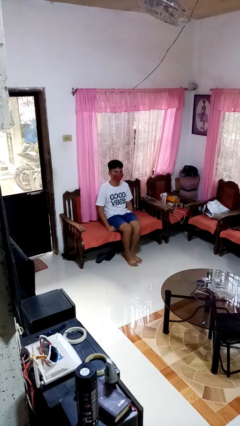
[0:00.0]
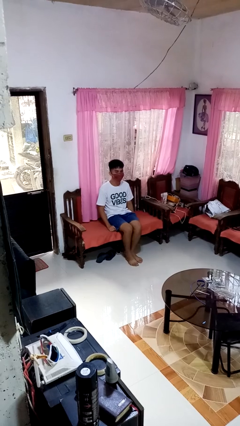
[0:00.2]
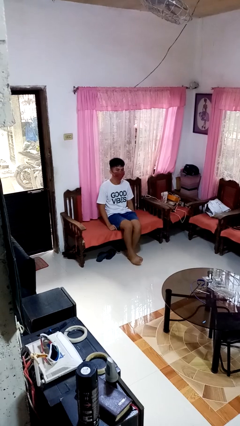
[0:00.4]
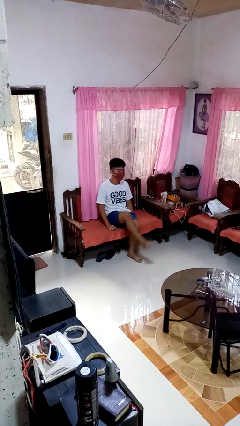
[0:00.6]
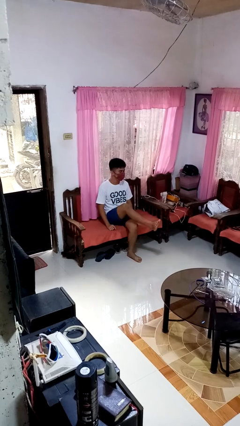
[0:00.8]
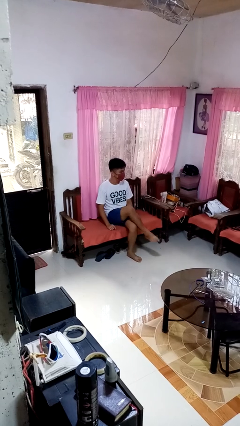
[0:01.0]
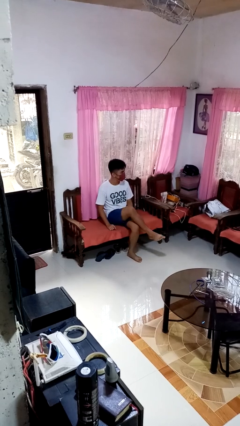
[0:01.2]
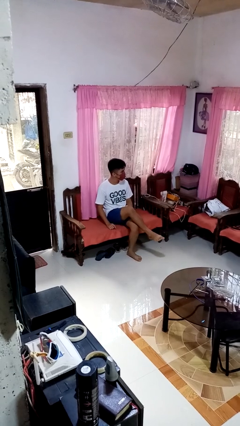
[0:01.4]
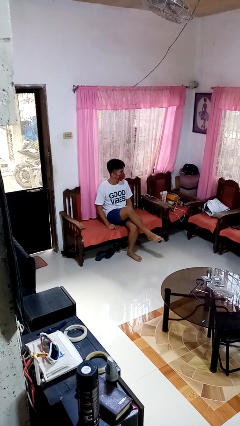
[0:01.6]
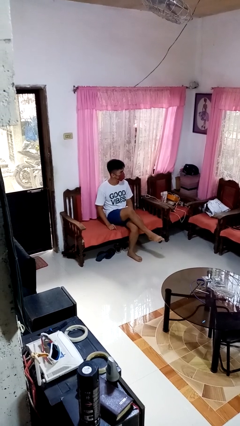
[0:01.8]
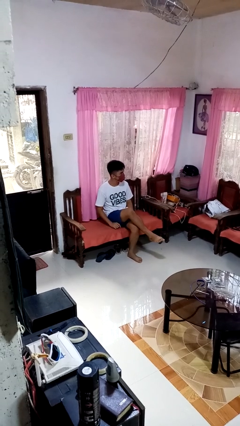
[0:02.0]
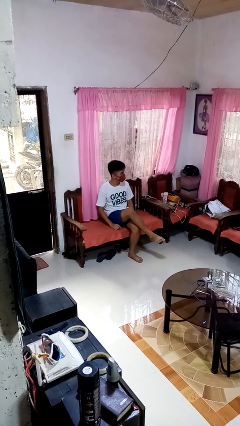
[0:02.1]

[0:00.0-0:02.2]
person crosses legs

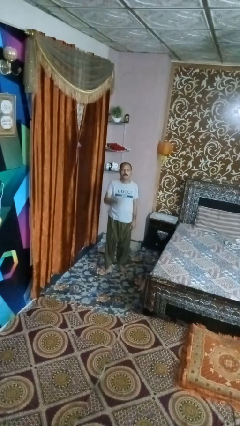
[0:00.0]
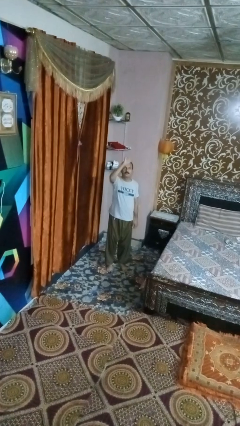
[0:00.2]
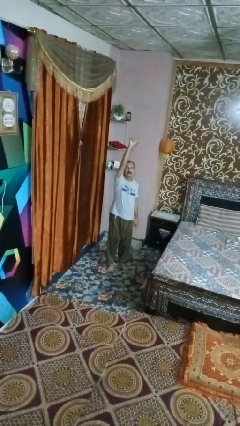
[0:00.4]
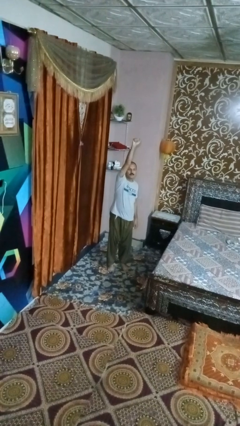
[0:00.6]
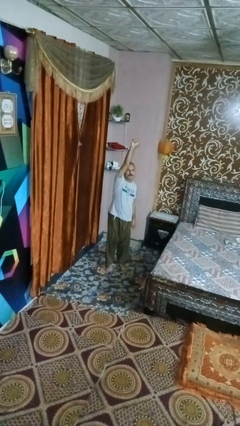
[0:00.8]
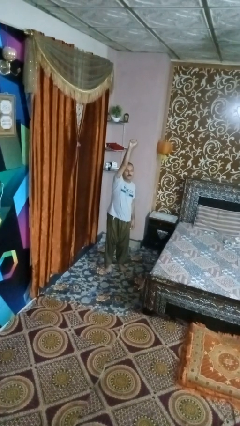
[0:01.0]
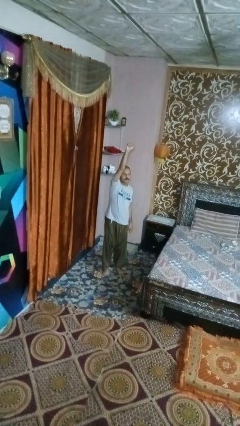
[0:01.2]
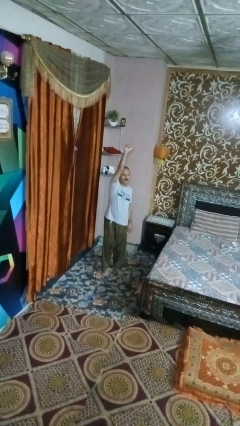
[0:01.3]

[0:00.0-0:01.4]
person punches

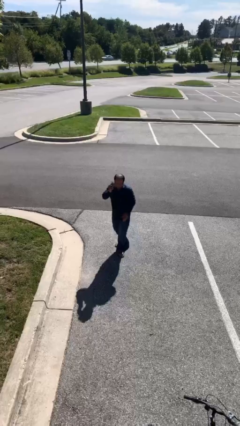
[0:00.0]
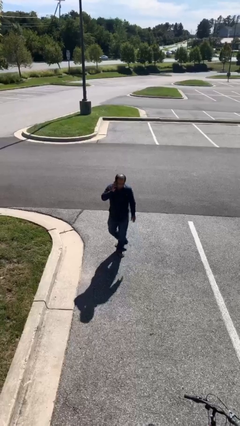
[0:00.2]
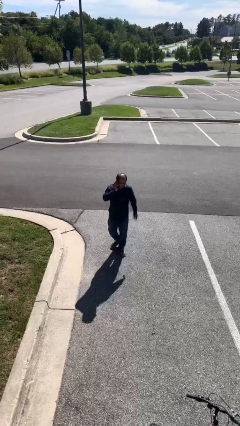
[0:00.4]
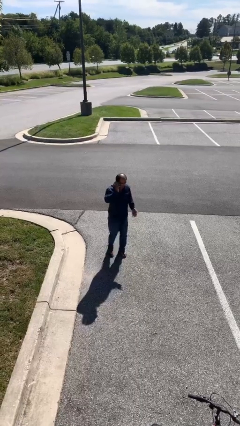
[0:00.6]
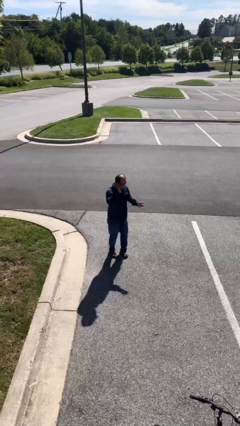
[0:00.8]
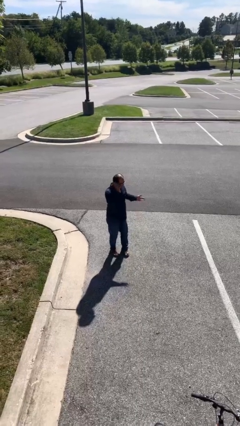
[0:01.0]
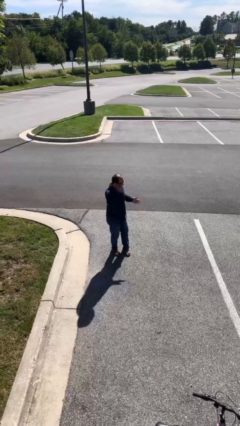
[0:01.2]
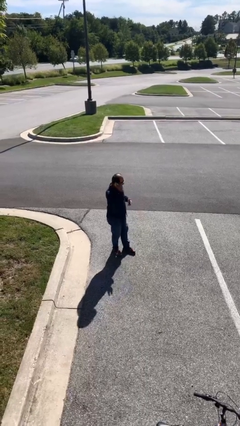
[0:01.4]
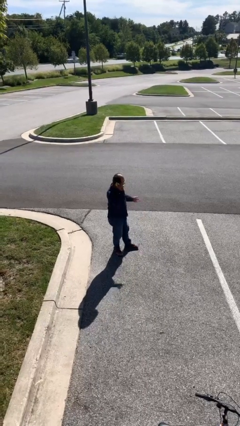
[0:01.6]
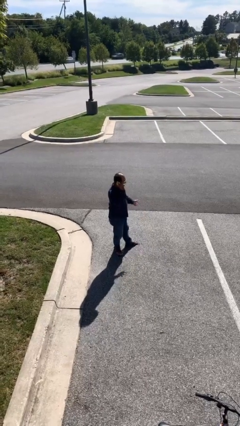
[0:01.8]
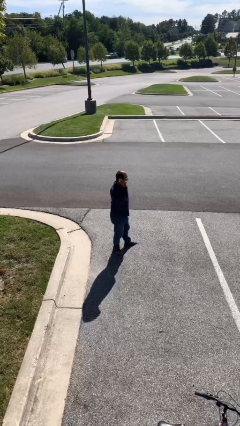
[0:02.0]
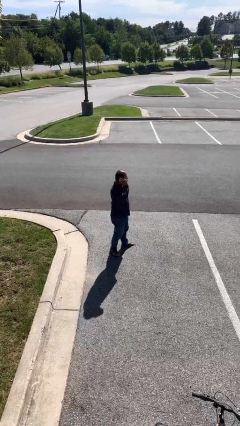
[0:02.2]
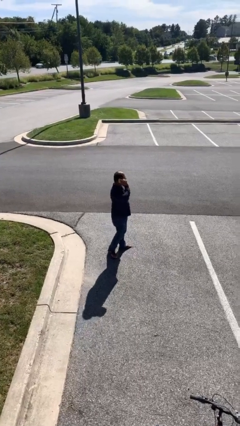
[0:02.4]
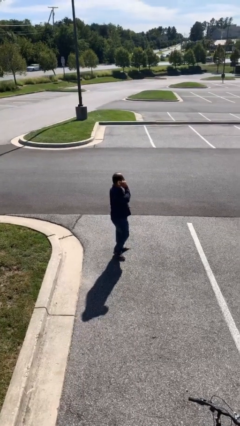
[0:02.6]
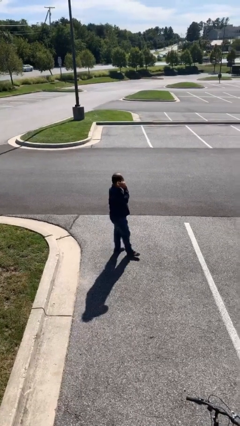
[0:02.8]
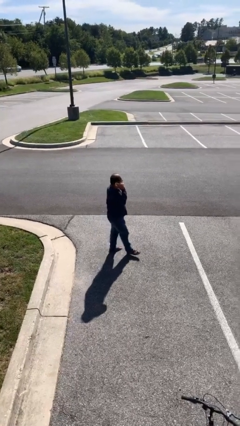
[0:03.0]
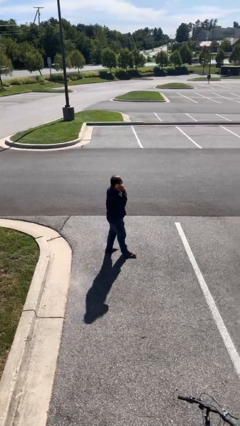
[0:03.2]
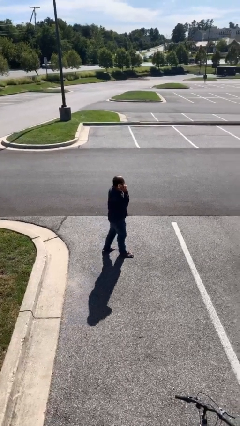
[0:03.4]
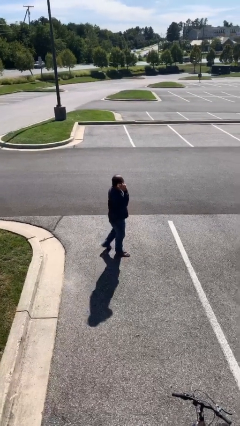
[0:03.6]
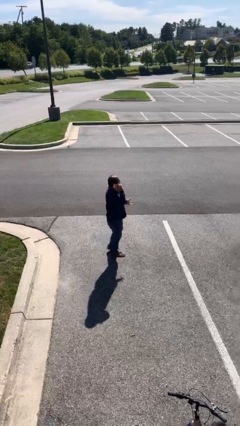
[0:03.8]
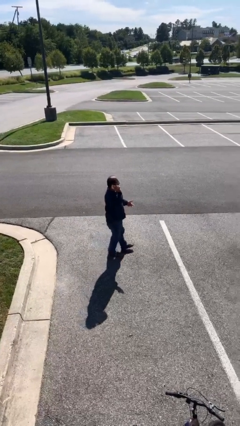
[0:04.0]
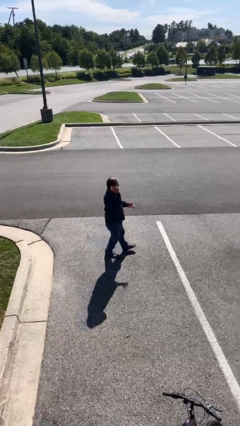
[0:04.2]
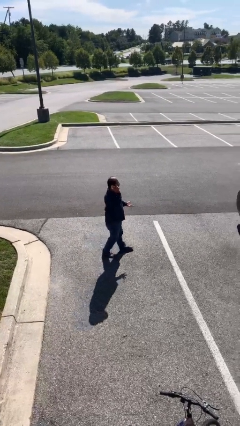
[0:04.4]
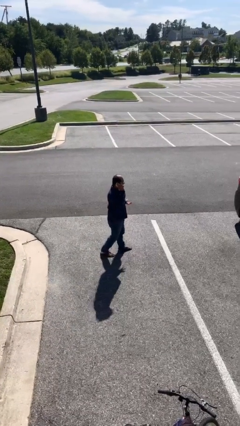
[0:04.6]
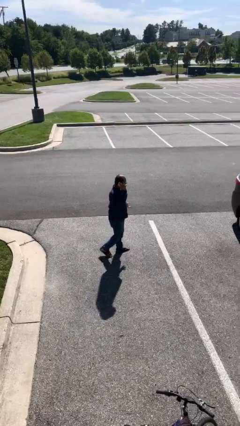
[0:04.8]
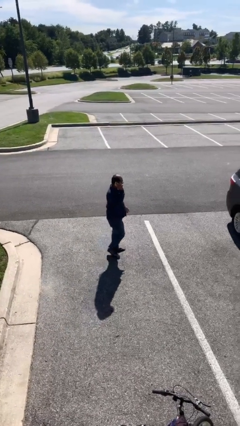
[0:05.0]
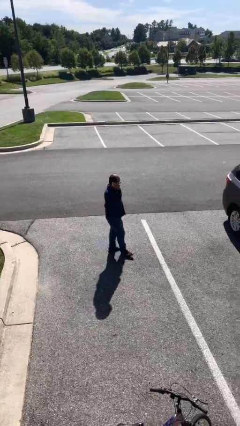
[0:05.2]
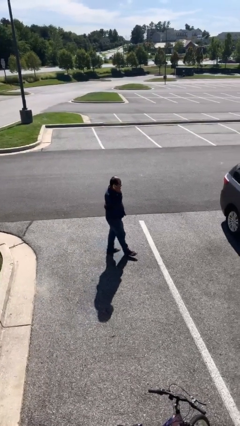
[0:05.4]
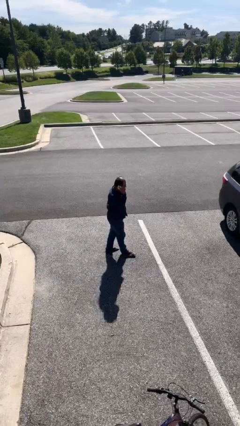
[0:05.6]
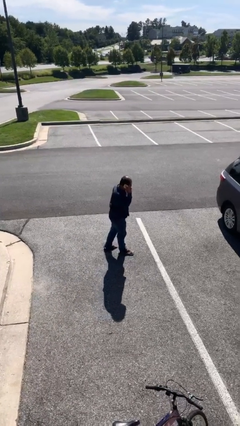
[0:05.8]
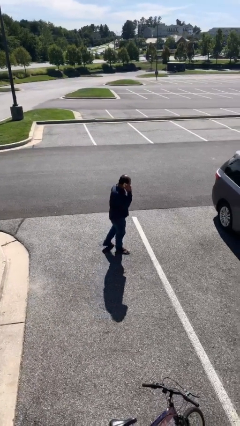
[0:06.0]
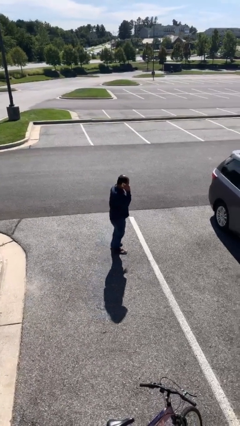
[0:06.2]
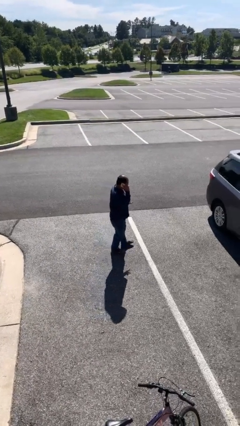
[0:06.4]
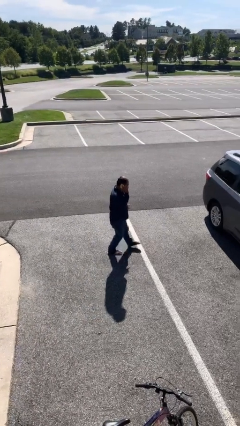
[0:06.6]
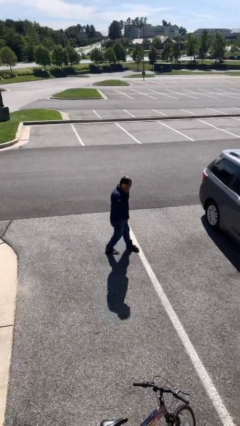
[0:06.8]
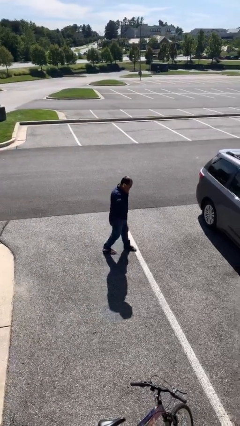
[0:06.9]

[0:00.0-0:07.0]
person talks on phone

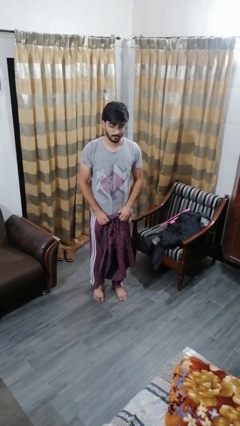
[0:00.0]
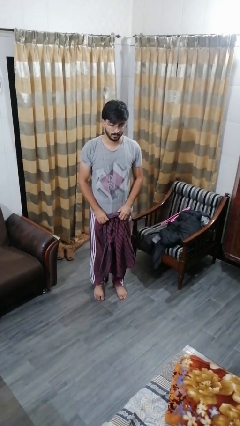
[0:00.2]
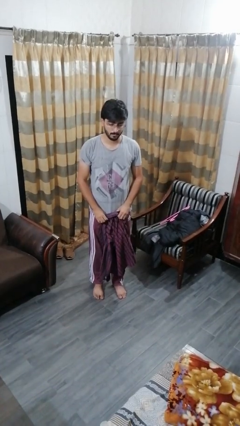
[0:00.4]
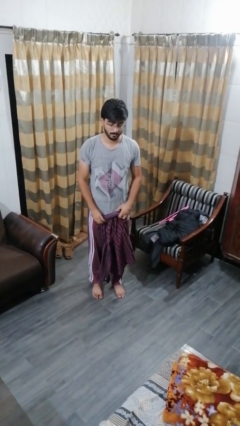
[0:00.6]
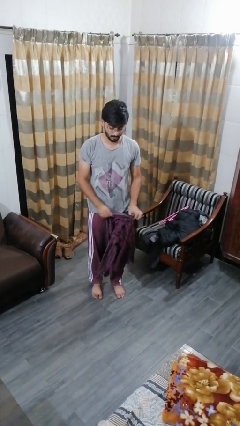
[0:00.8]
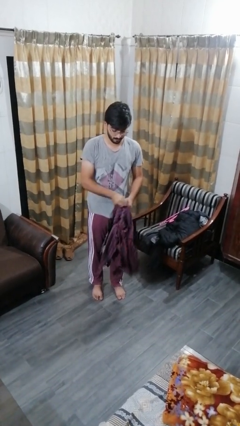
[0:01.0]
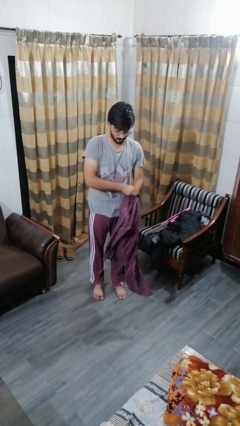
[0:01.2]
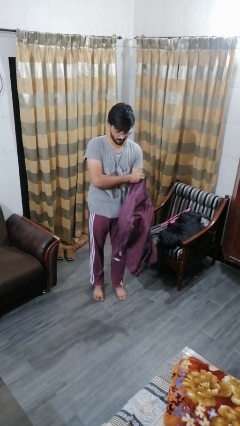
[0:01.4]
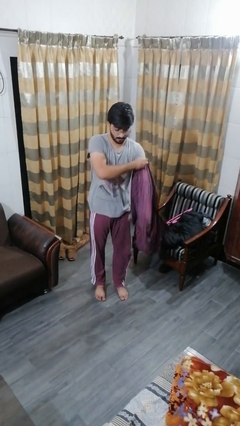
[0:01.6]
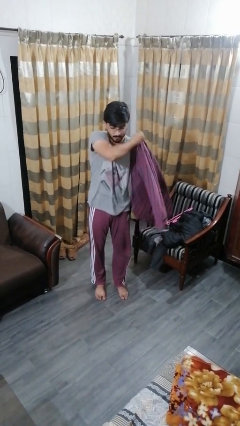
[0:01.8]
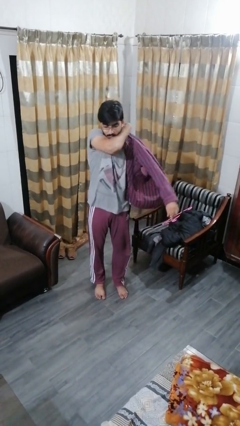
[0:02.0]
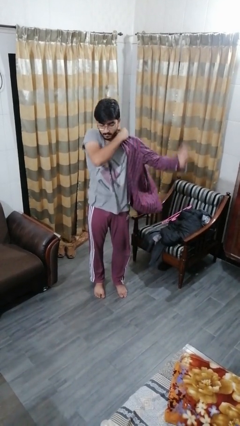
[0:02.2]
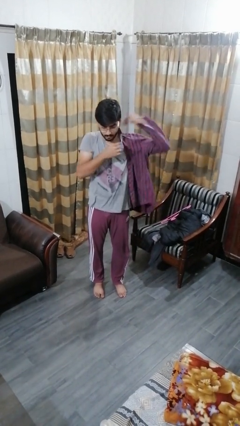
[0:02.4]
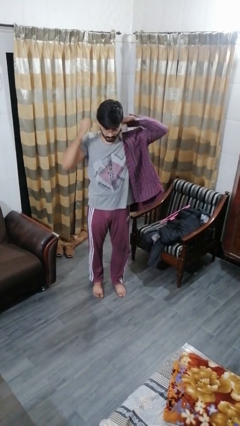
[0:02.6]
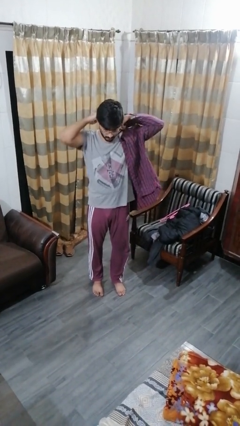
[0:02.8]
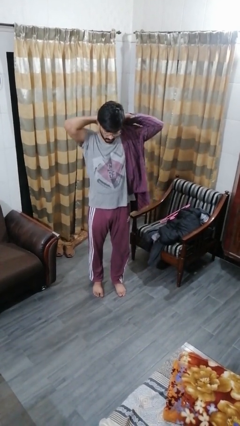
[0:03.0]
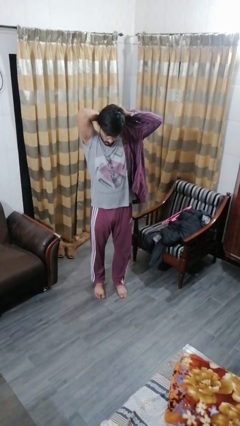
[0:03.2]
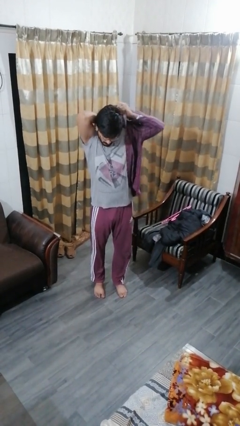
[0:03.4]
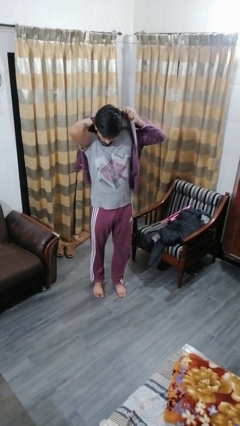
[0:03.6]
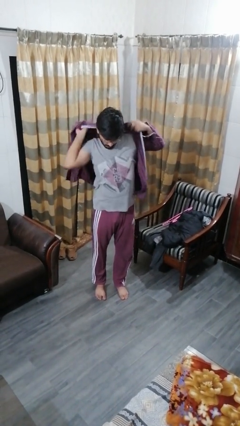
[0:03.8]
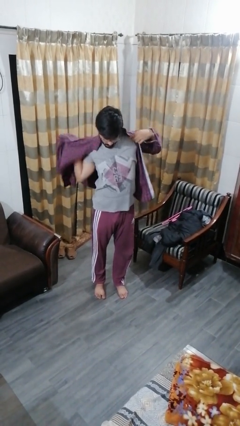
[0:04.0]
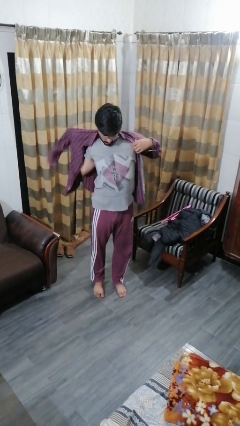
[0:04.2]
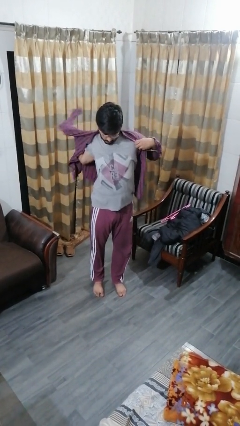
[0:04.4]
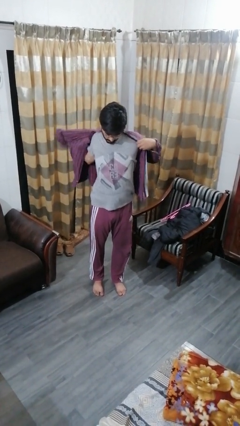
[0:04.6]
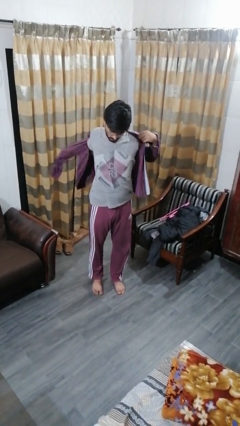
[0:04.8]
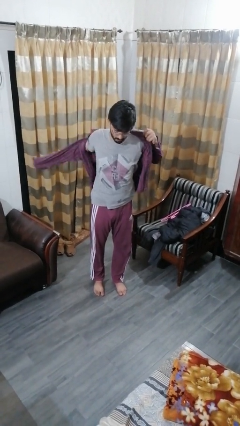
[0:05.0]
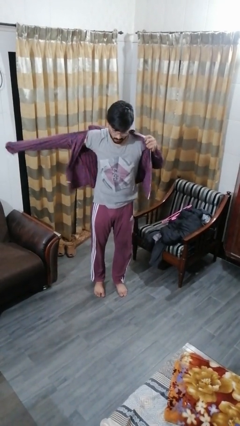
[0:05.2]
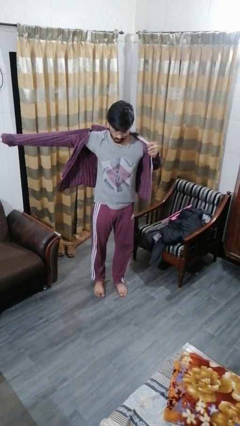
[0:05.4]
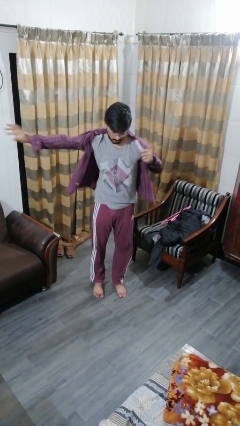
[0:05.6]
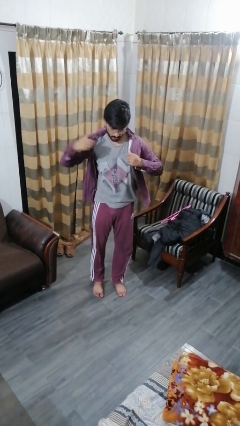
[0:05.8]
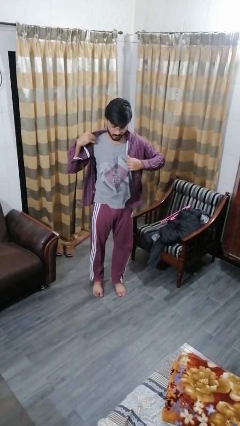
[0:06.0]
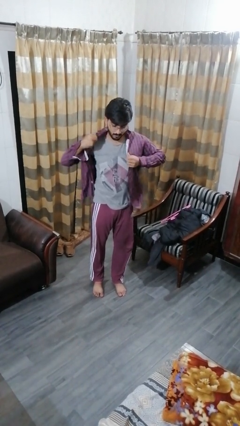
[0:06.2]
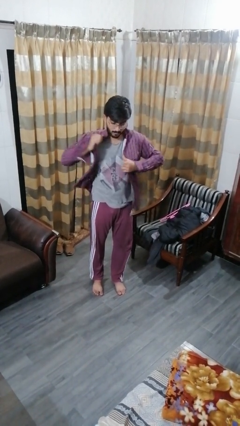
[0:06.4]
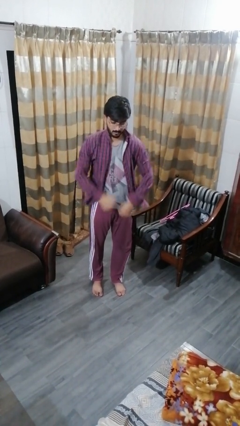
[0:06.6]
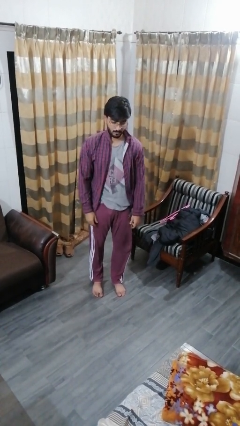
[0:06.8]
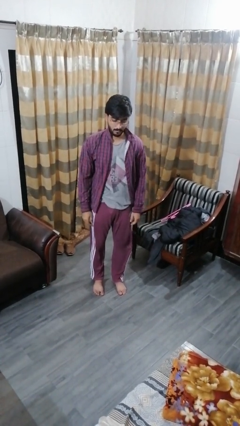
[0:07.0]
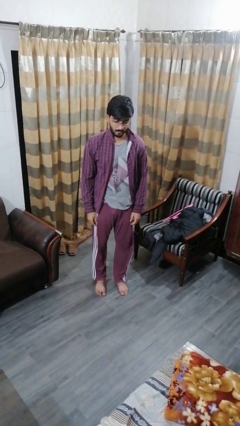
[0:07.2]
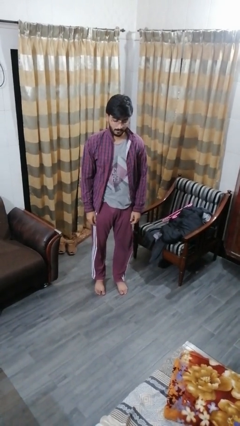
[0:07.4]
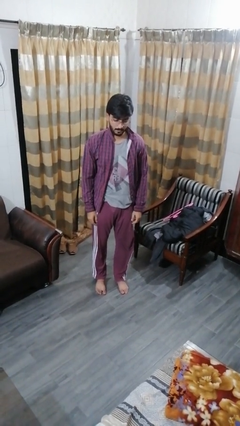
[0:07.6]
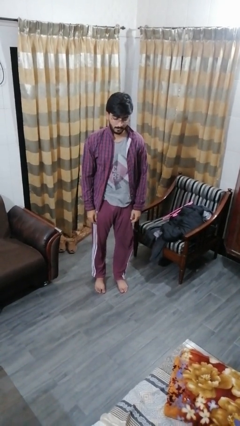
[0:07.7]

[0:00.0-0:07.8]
person puts on shirt
